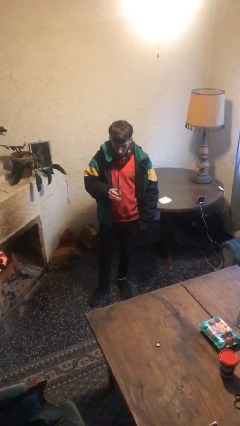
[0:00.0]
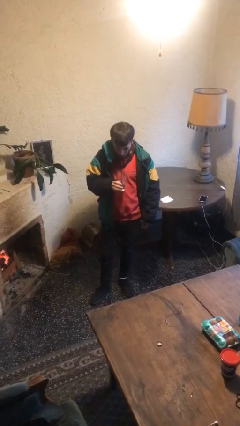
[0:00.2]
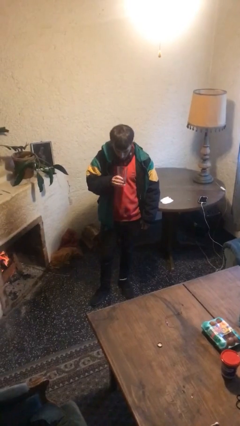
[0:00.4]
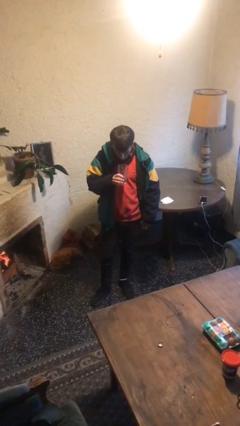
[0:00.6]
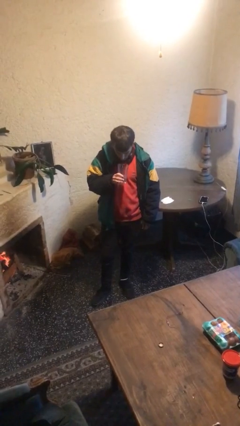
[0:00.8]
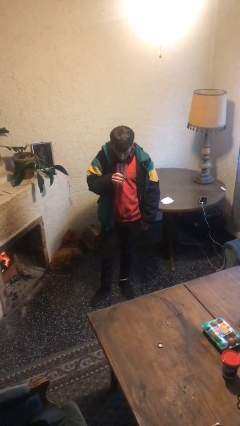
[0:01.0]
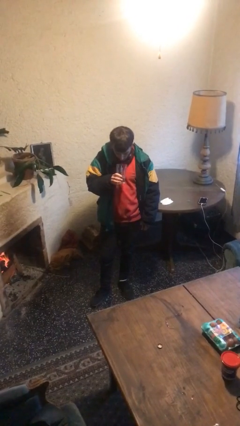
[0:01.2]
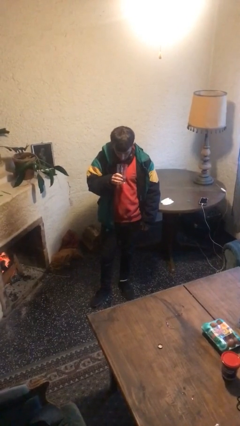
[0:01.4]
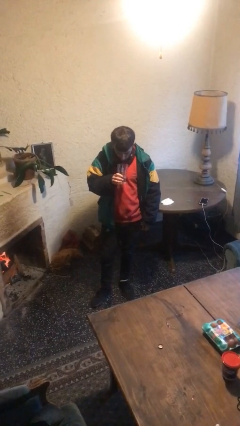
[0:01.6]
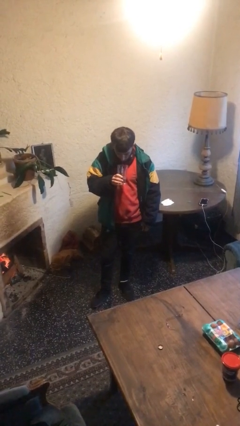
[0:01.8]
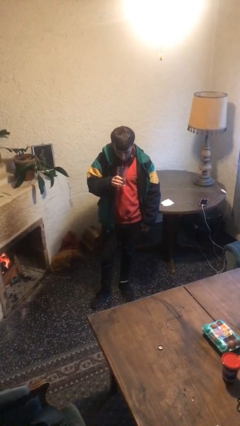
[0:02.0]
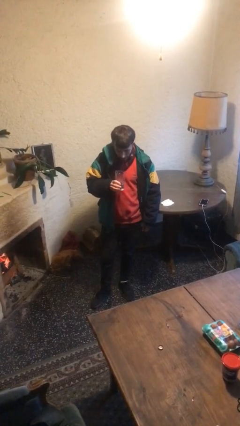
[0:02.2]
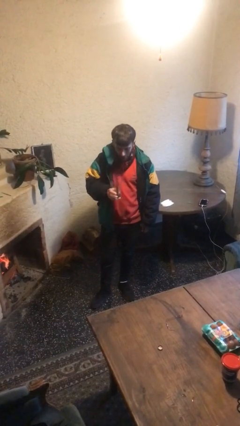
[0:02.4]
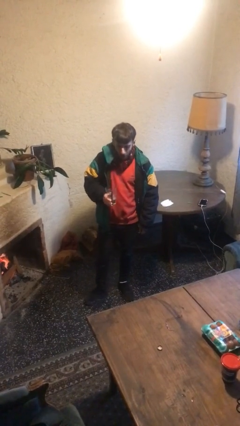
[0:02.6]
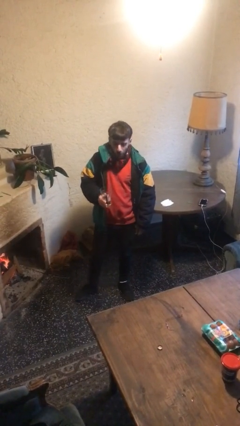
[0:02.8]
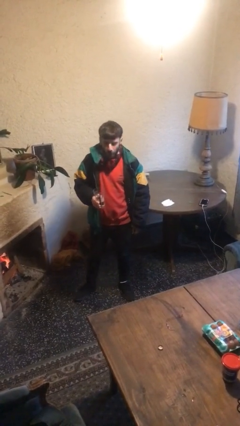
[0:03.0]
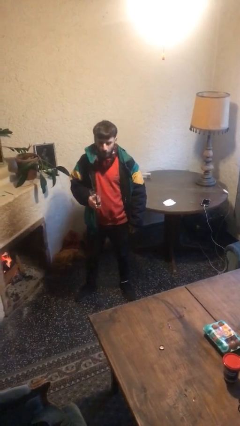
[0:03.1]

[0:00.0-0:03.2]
person drinks from straw

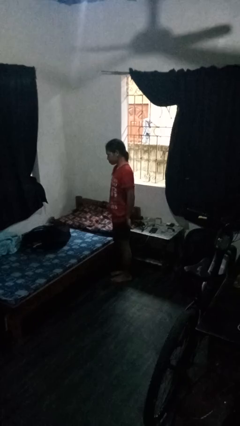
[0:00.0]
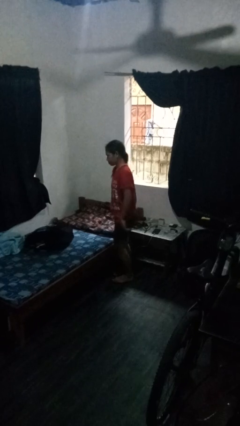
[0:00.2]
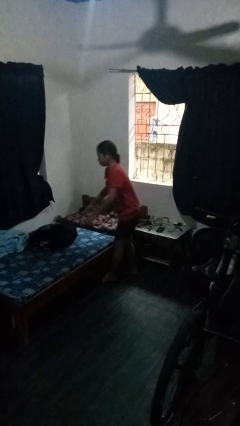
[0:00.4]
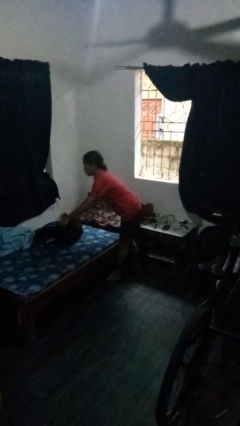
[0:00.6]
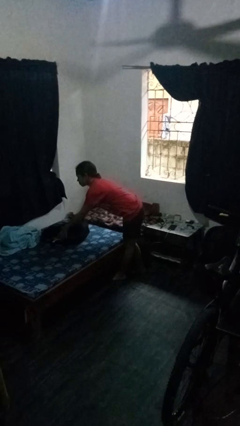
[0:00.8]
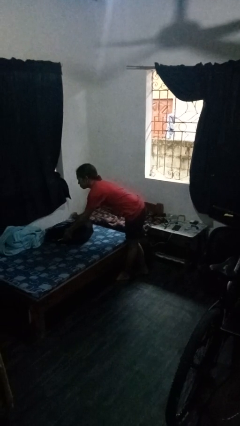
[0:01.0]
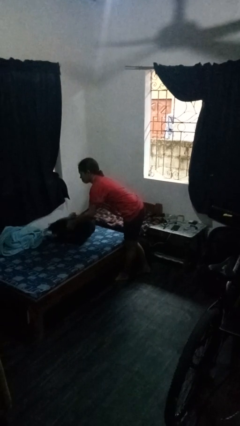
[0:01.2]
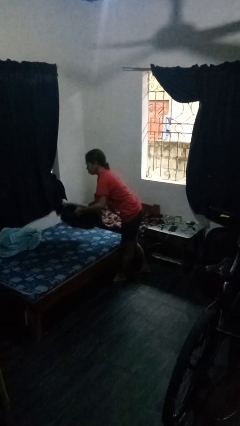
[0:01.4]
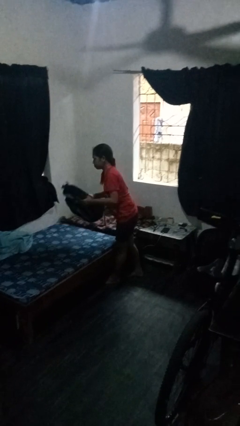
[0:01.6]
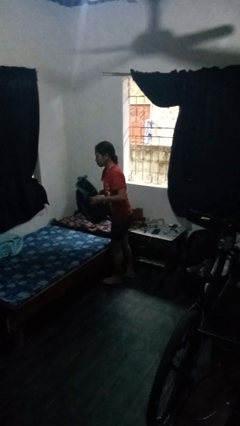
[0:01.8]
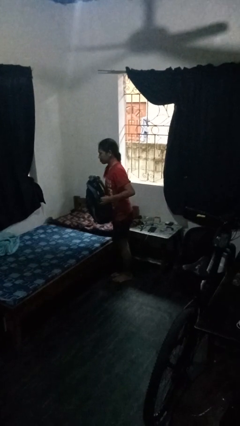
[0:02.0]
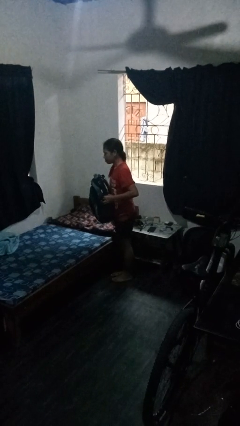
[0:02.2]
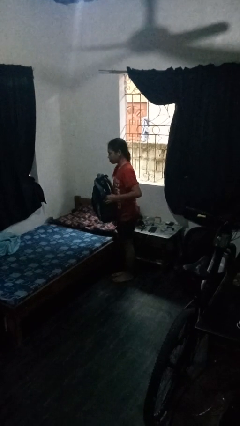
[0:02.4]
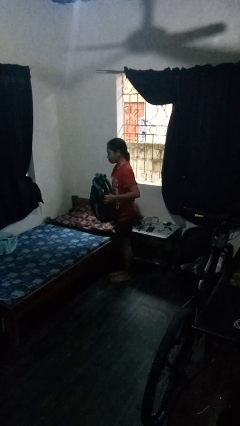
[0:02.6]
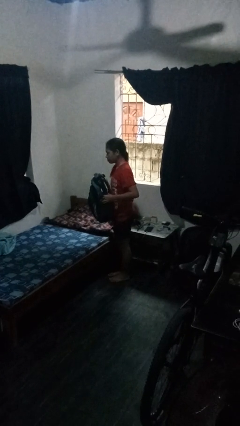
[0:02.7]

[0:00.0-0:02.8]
person picks up object from bed

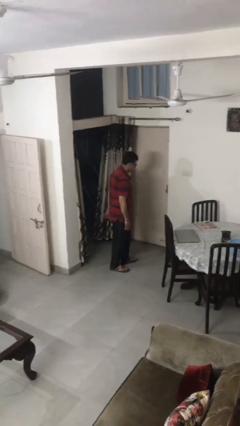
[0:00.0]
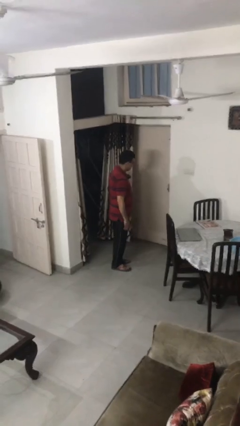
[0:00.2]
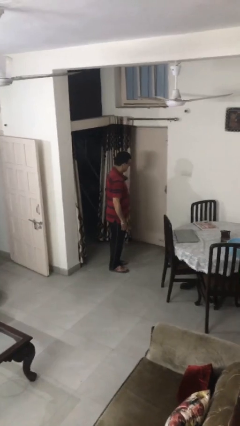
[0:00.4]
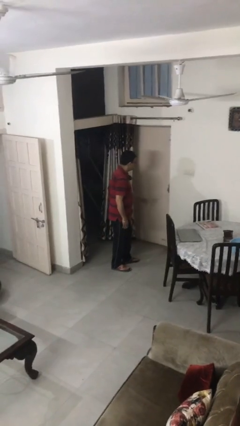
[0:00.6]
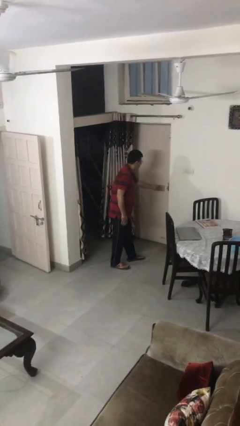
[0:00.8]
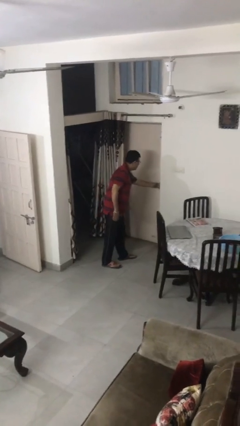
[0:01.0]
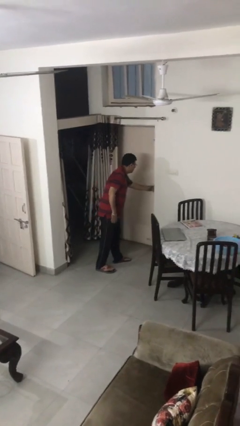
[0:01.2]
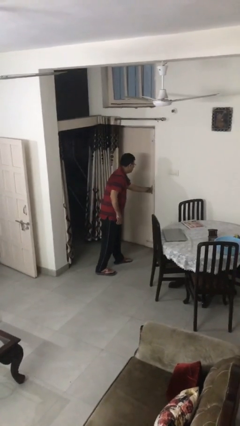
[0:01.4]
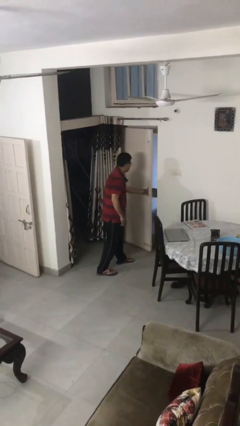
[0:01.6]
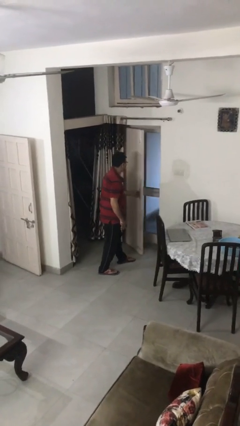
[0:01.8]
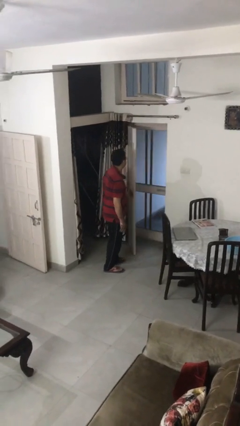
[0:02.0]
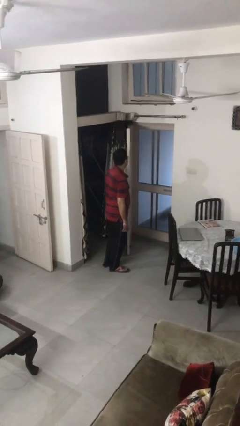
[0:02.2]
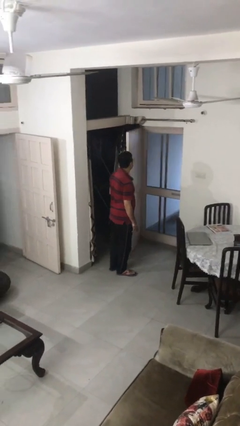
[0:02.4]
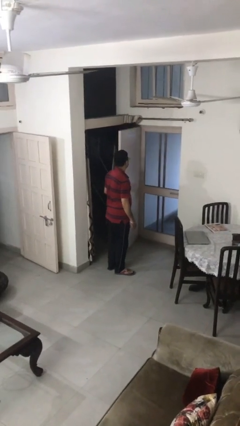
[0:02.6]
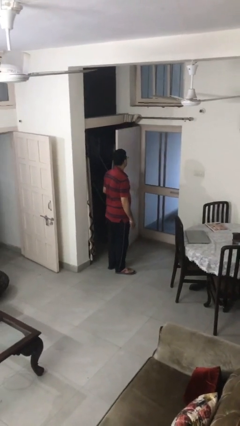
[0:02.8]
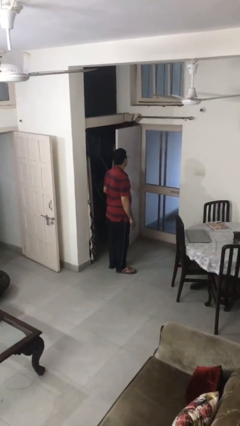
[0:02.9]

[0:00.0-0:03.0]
person opens facility door

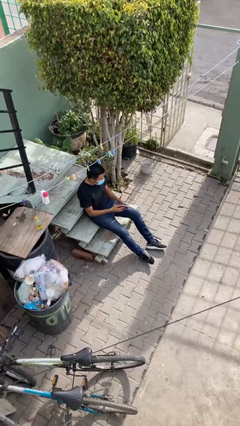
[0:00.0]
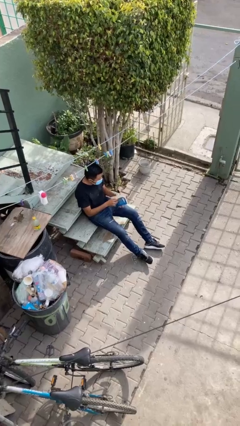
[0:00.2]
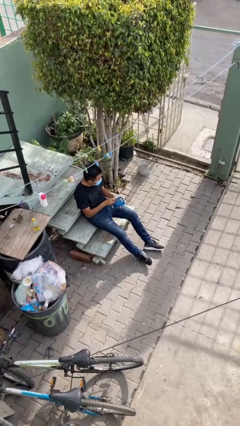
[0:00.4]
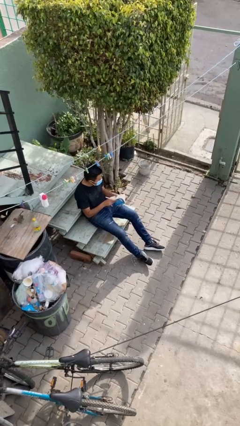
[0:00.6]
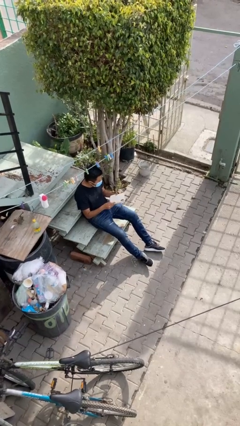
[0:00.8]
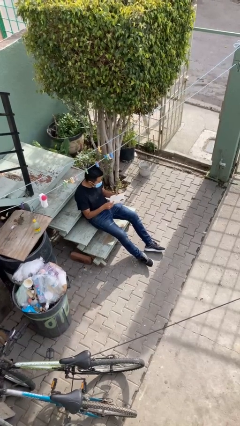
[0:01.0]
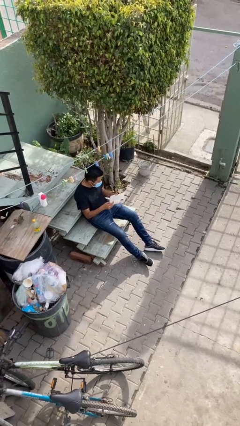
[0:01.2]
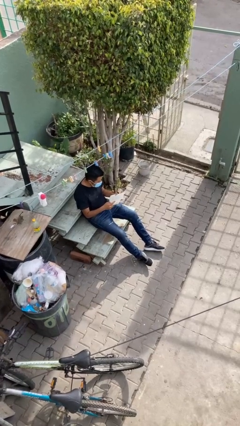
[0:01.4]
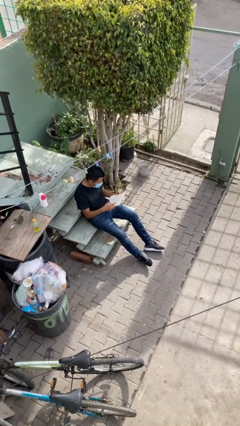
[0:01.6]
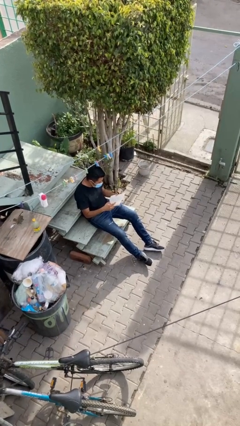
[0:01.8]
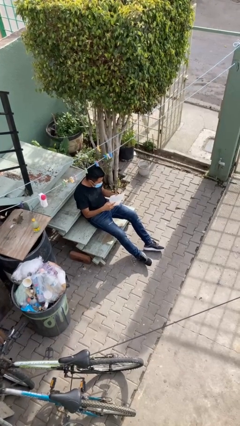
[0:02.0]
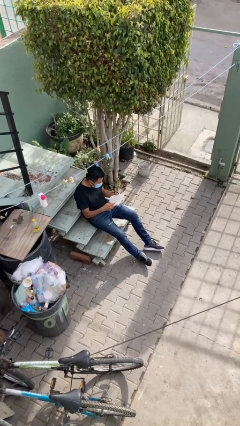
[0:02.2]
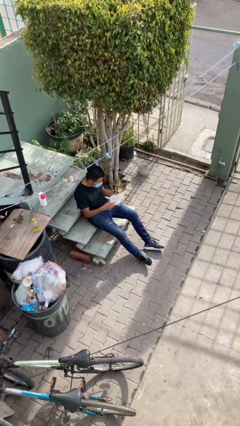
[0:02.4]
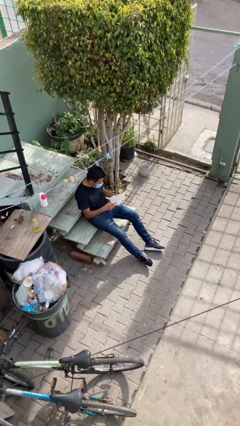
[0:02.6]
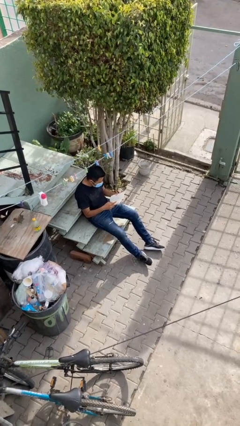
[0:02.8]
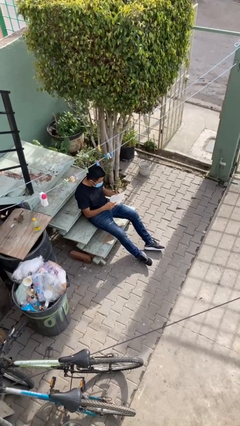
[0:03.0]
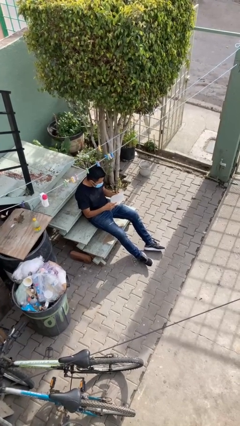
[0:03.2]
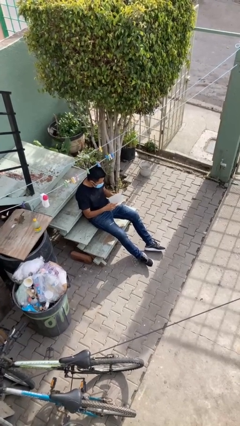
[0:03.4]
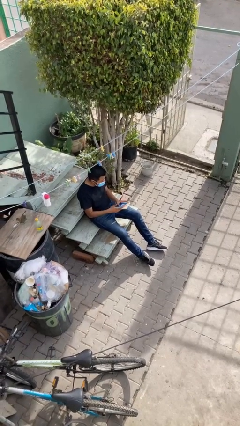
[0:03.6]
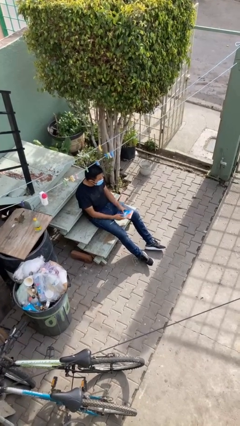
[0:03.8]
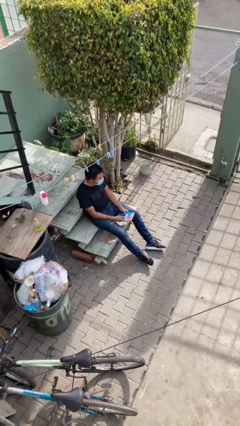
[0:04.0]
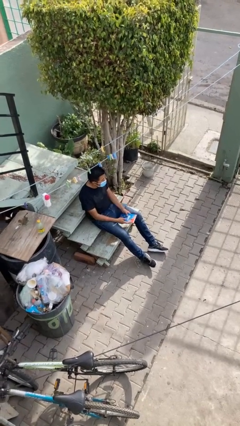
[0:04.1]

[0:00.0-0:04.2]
person reads document

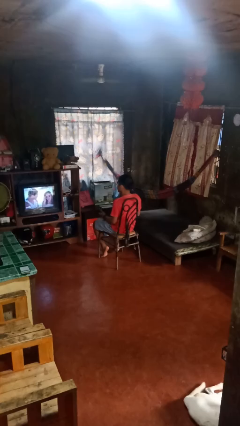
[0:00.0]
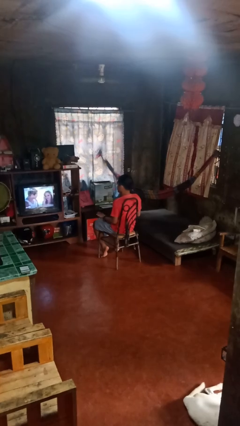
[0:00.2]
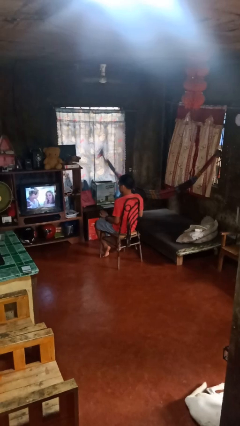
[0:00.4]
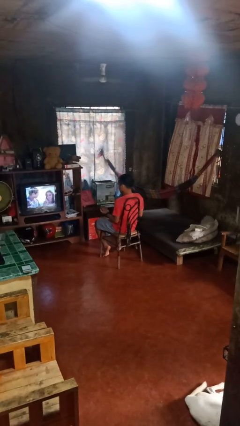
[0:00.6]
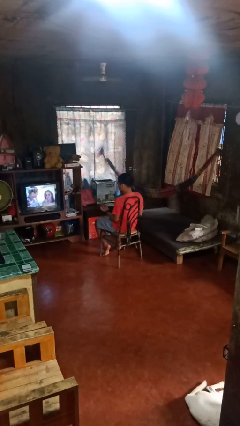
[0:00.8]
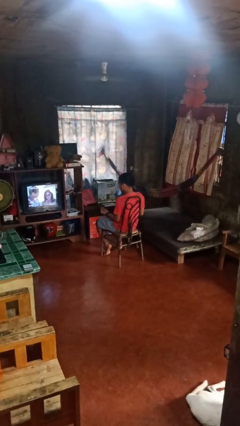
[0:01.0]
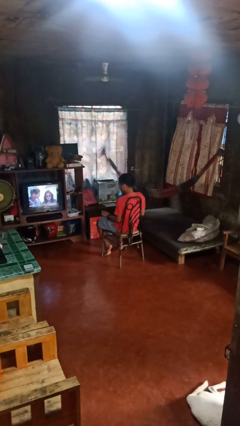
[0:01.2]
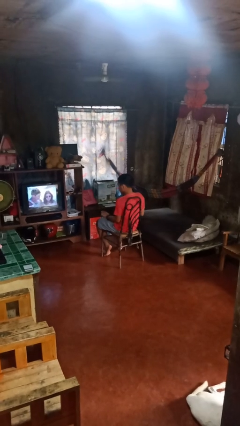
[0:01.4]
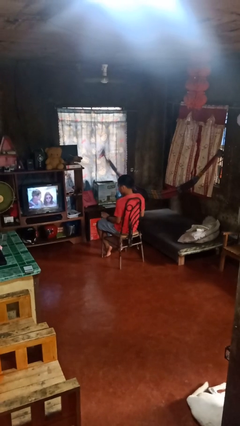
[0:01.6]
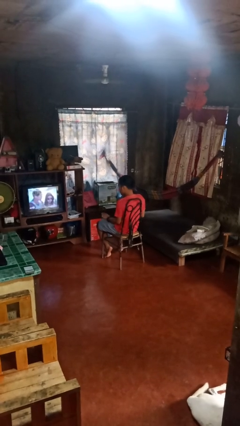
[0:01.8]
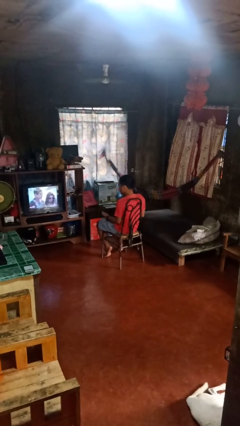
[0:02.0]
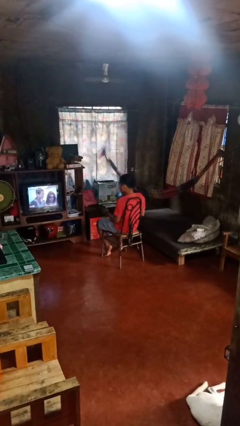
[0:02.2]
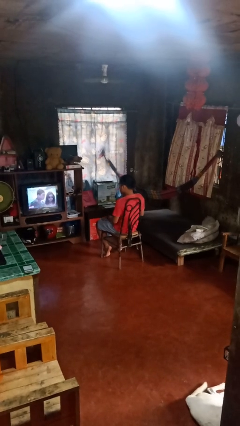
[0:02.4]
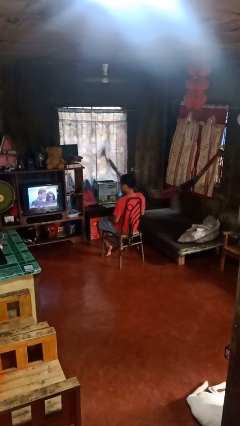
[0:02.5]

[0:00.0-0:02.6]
person looks at hands in lap

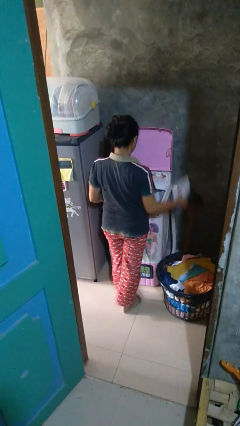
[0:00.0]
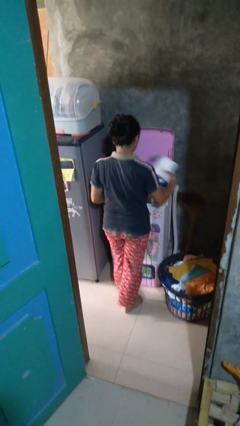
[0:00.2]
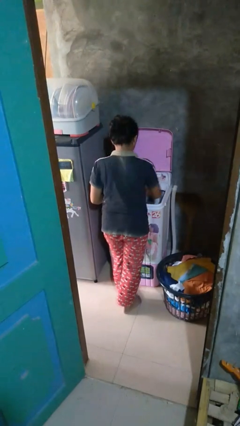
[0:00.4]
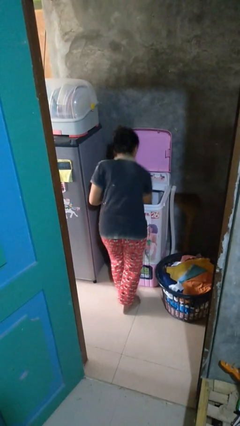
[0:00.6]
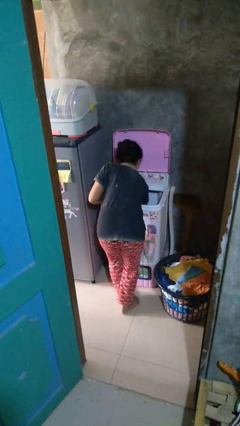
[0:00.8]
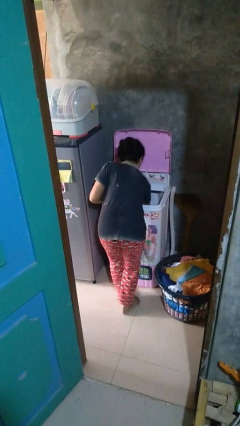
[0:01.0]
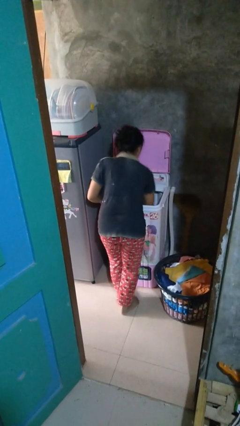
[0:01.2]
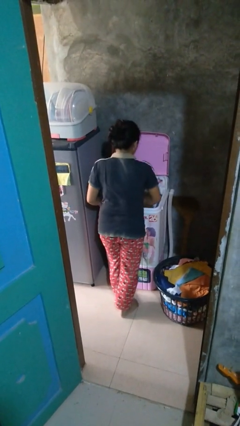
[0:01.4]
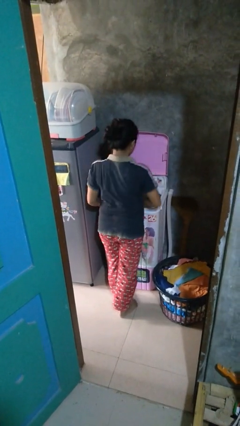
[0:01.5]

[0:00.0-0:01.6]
person loads clotheswasher
